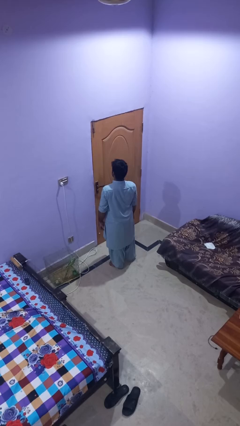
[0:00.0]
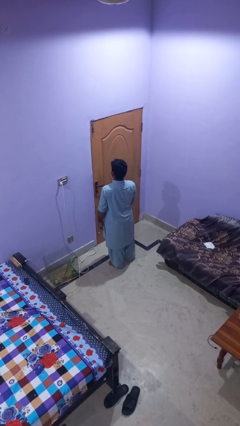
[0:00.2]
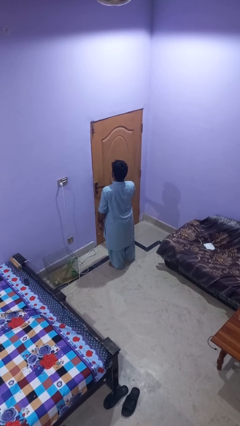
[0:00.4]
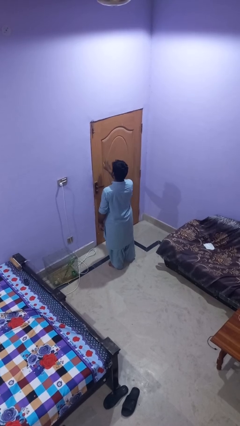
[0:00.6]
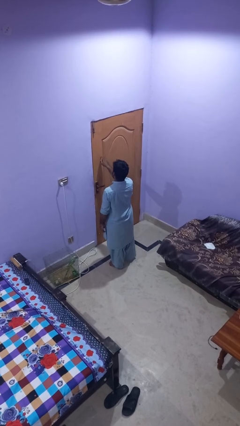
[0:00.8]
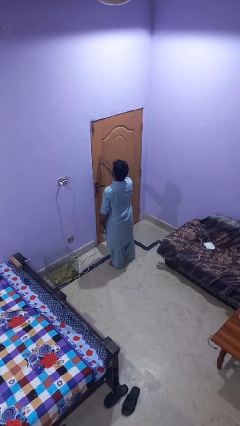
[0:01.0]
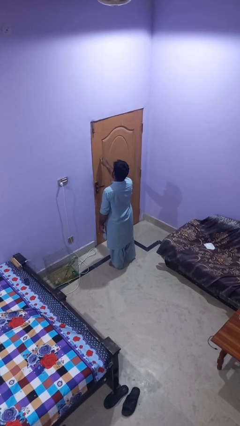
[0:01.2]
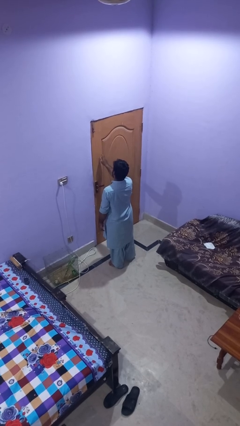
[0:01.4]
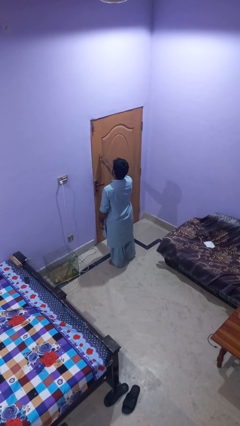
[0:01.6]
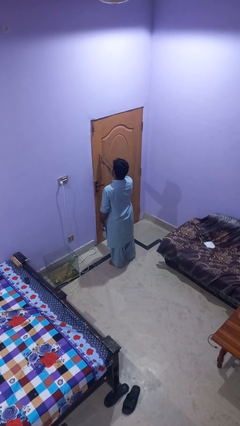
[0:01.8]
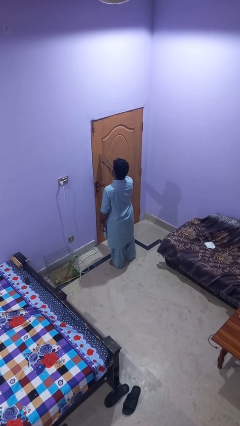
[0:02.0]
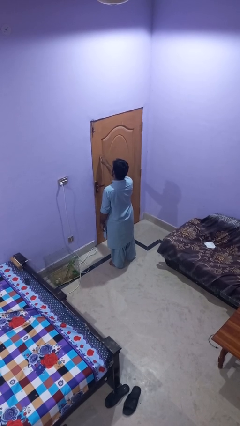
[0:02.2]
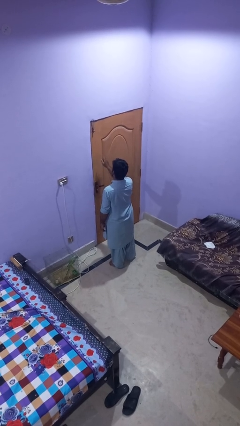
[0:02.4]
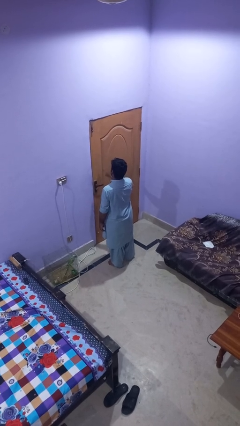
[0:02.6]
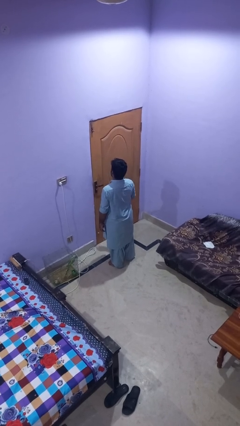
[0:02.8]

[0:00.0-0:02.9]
person taps object with finger

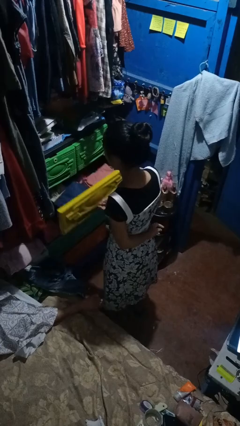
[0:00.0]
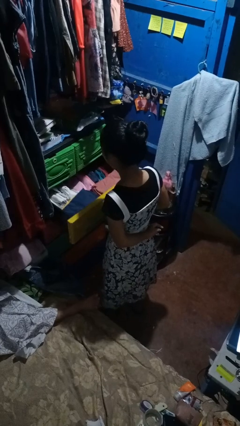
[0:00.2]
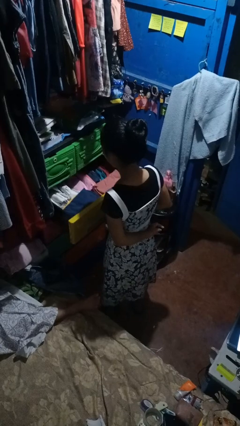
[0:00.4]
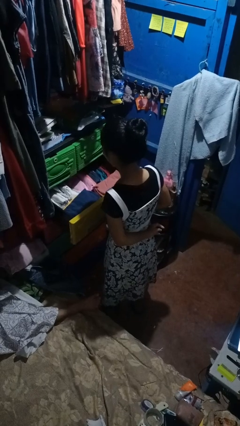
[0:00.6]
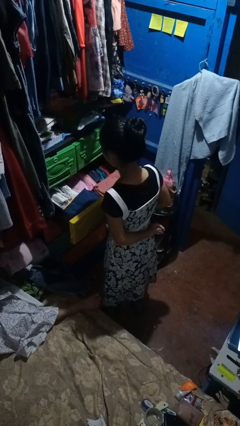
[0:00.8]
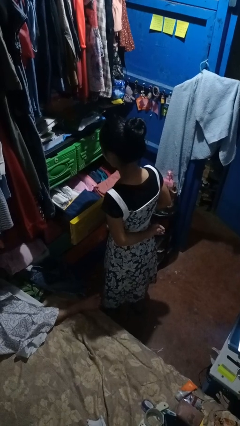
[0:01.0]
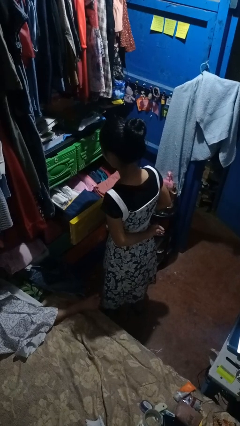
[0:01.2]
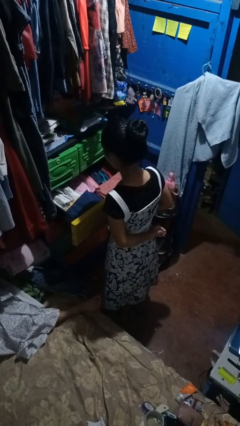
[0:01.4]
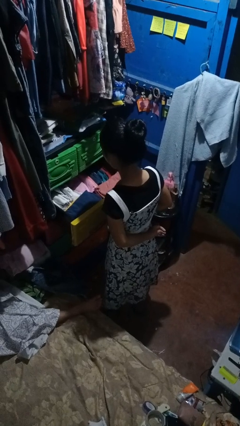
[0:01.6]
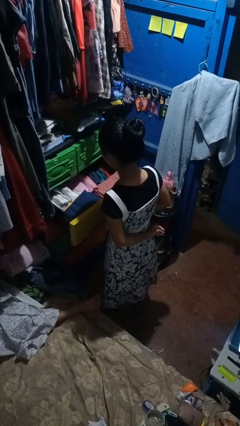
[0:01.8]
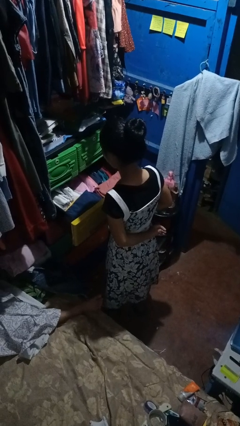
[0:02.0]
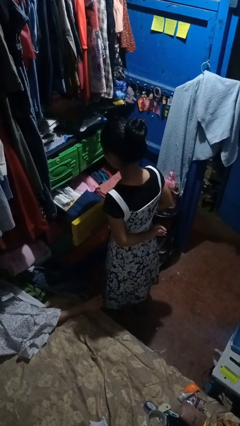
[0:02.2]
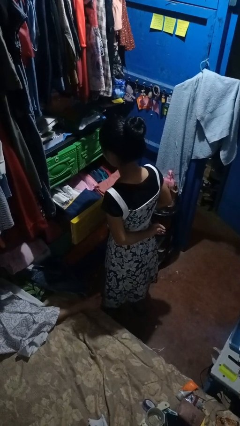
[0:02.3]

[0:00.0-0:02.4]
person opens dresser drawer

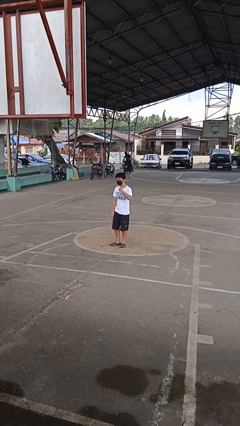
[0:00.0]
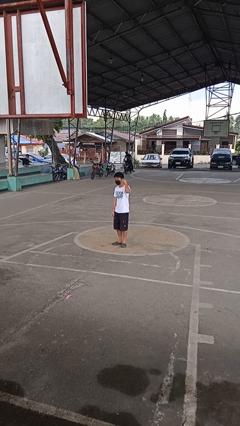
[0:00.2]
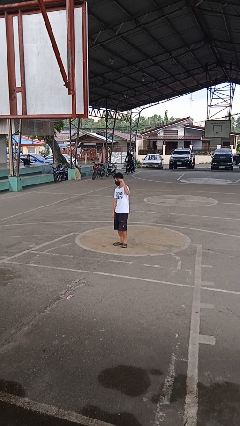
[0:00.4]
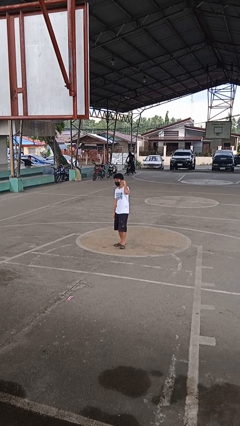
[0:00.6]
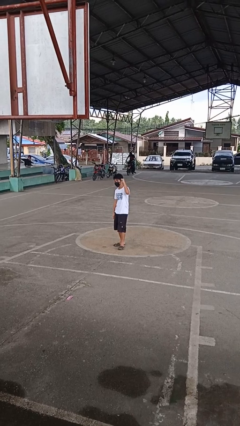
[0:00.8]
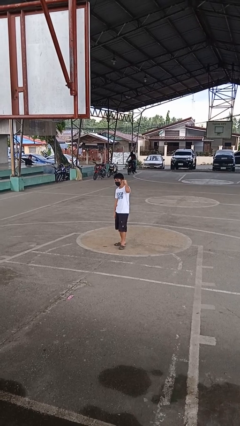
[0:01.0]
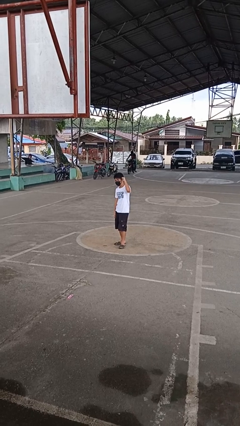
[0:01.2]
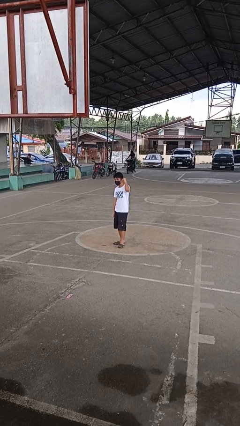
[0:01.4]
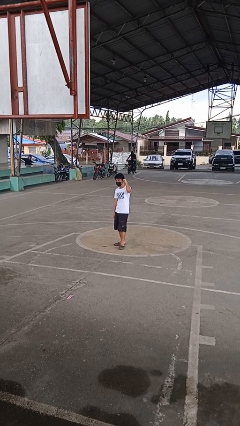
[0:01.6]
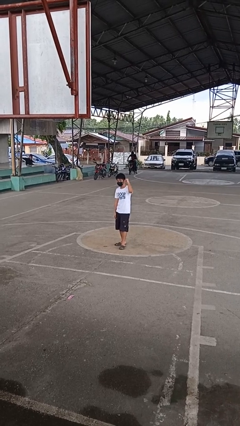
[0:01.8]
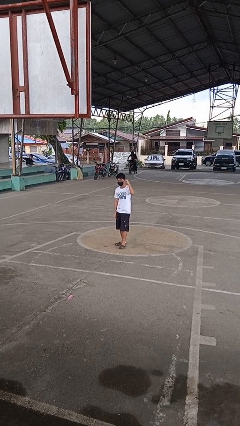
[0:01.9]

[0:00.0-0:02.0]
person gestures behind me

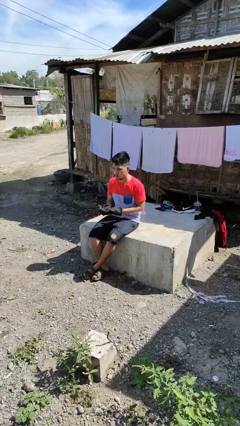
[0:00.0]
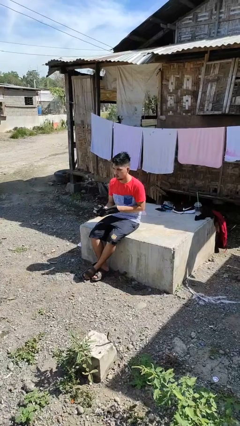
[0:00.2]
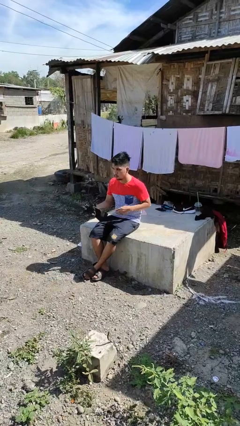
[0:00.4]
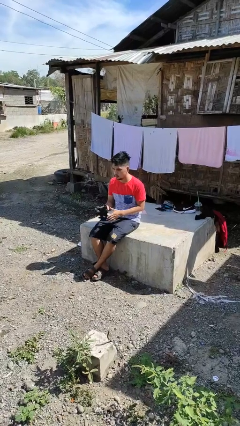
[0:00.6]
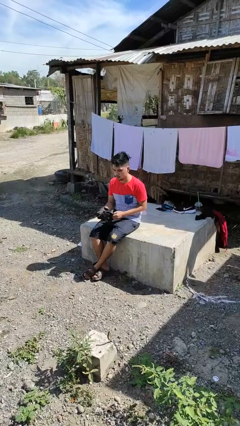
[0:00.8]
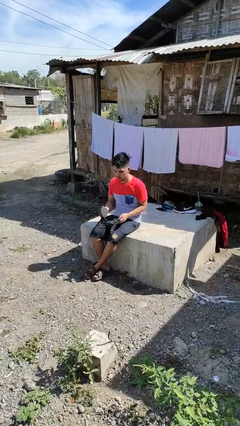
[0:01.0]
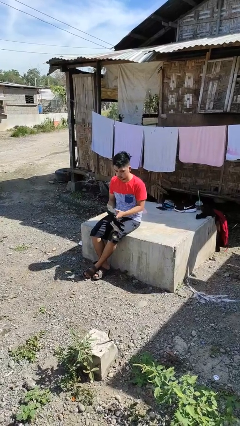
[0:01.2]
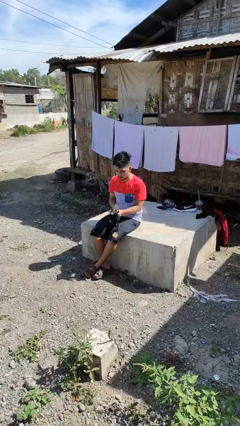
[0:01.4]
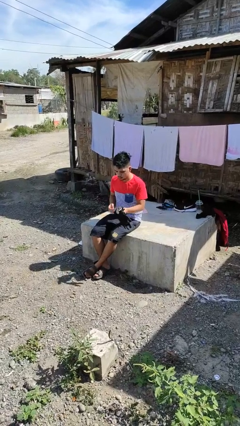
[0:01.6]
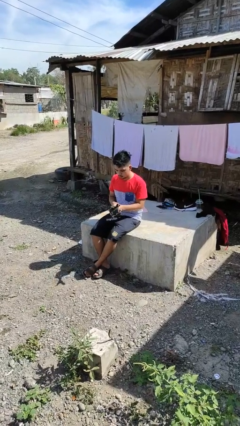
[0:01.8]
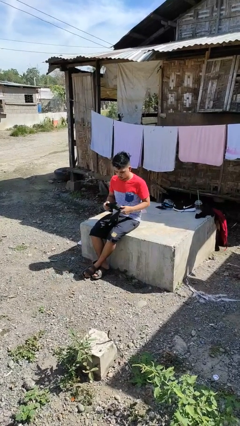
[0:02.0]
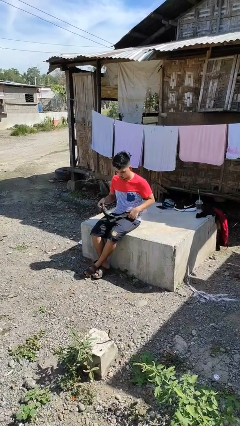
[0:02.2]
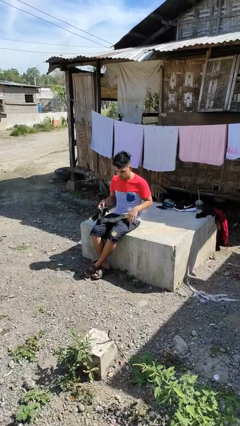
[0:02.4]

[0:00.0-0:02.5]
person takes off gloves

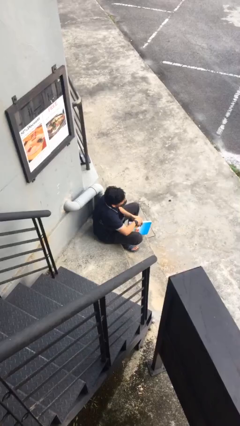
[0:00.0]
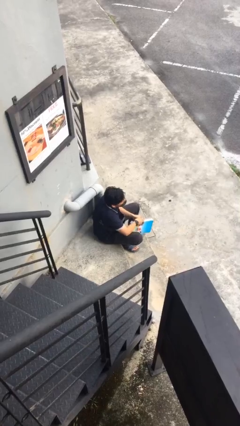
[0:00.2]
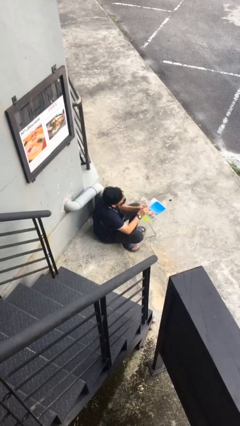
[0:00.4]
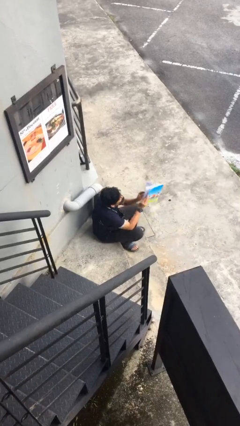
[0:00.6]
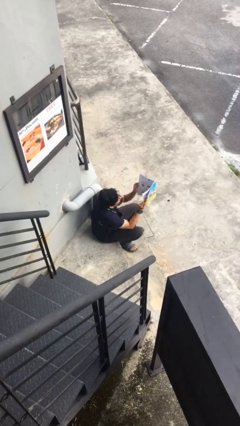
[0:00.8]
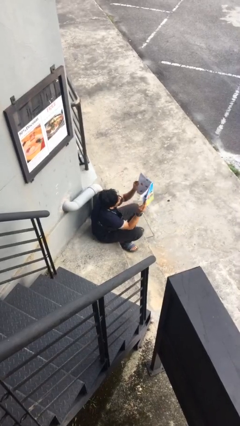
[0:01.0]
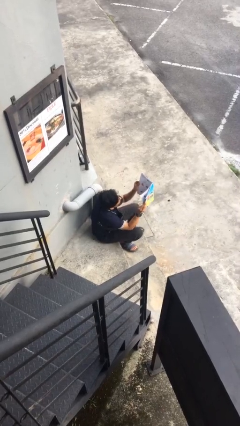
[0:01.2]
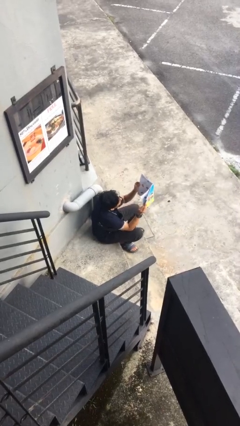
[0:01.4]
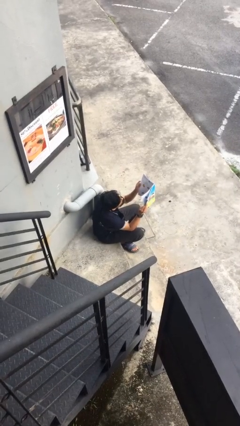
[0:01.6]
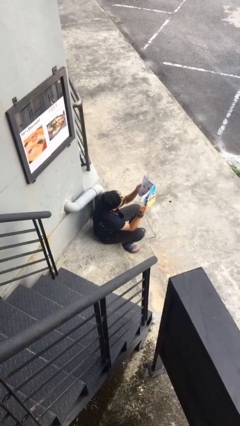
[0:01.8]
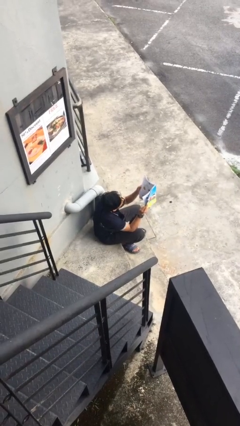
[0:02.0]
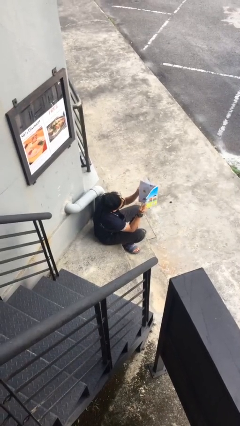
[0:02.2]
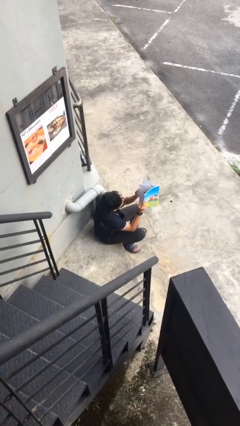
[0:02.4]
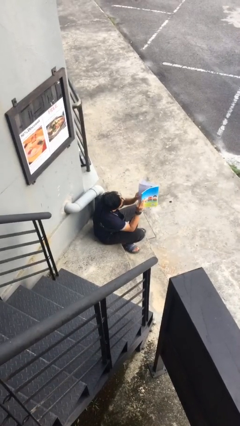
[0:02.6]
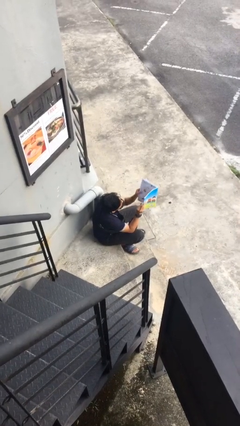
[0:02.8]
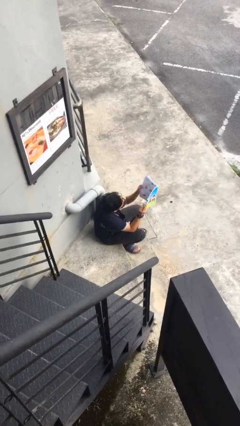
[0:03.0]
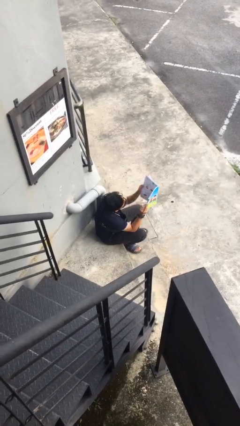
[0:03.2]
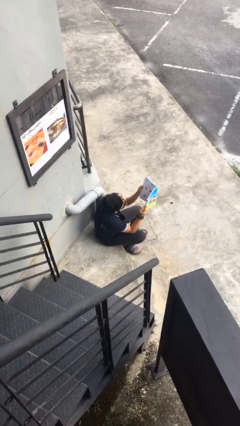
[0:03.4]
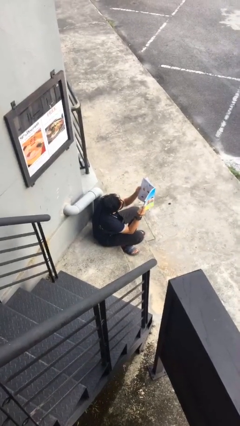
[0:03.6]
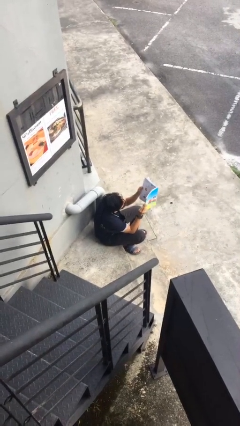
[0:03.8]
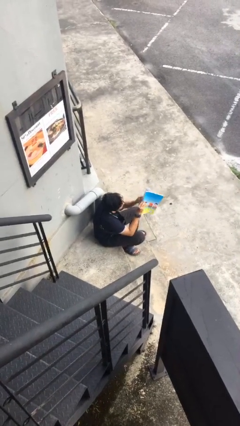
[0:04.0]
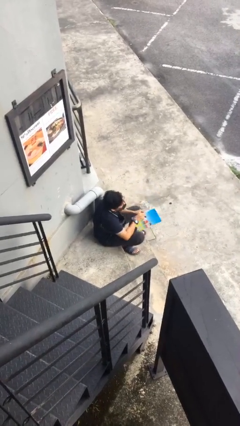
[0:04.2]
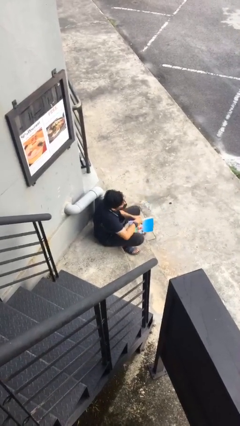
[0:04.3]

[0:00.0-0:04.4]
person reads document

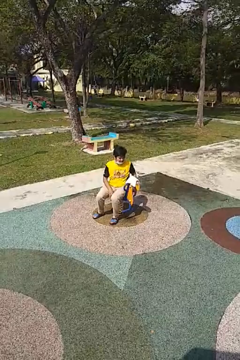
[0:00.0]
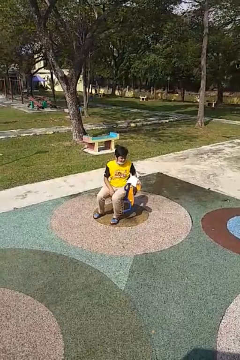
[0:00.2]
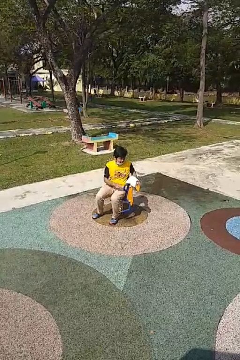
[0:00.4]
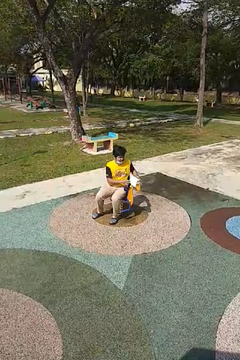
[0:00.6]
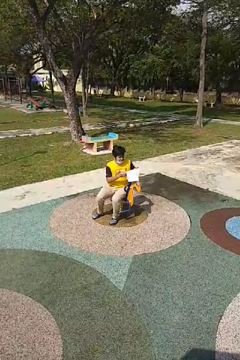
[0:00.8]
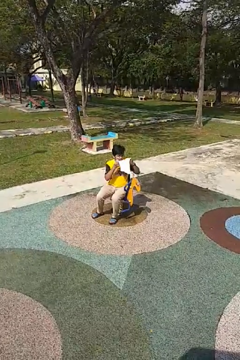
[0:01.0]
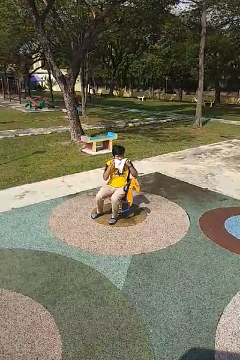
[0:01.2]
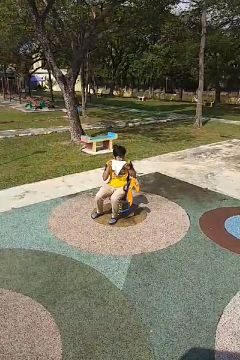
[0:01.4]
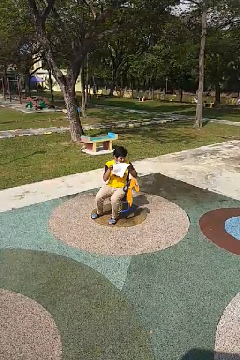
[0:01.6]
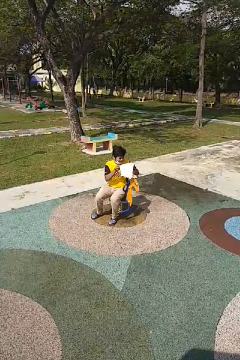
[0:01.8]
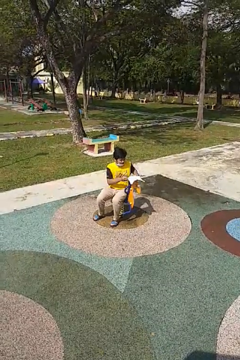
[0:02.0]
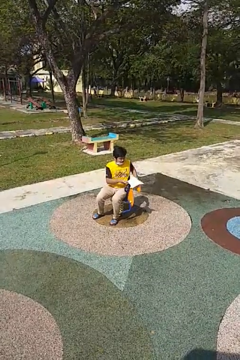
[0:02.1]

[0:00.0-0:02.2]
person wipes mouth with napkin

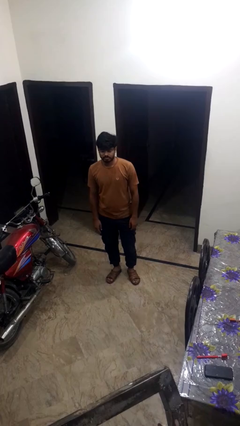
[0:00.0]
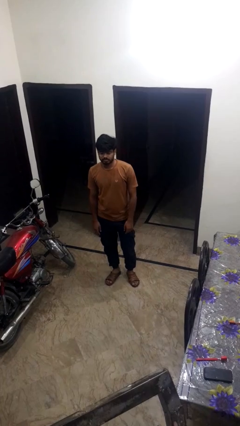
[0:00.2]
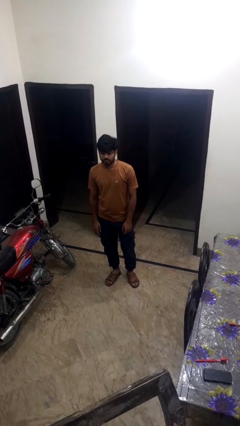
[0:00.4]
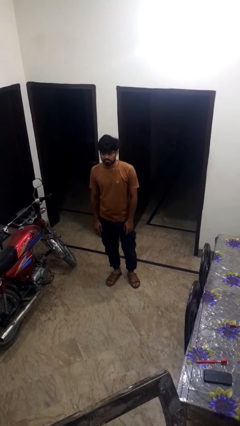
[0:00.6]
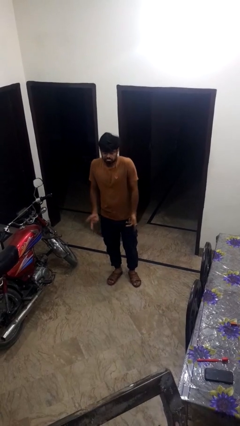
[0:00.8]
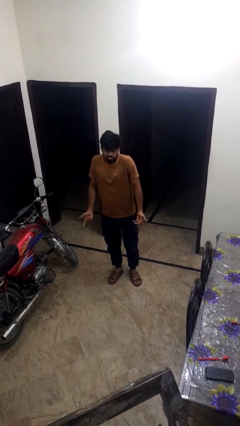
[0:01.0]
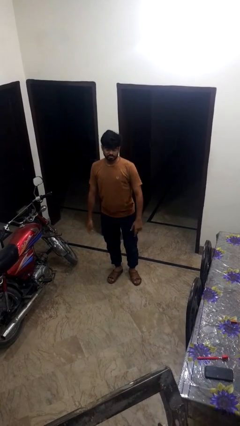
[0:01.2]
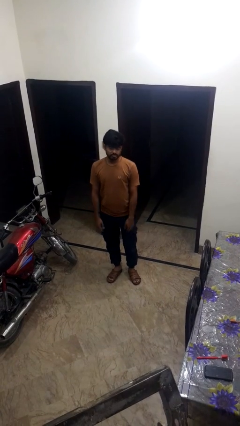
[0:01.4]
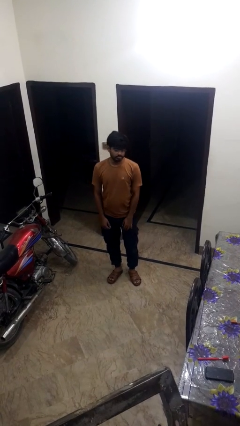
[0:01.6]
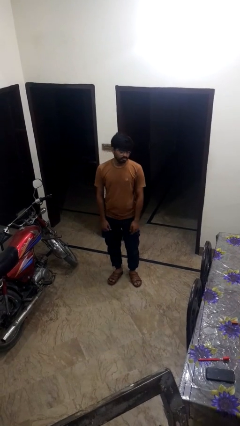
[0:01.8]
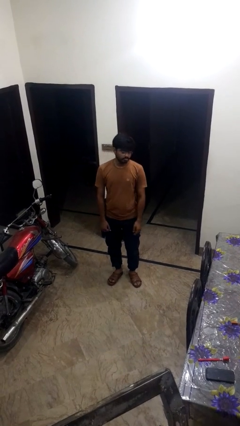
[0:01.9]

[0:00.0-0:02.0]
person shrugs
